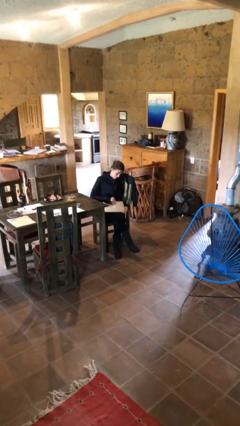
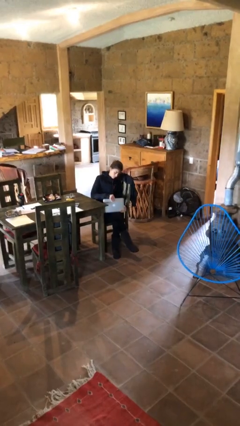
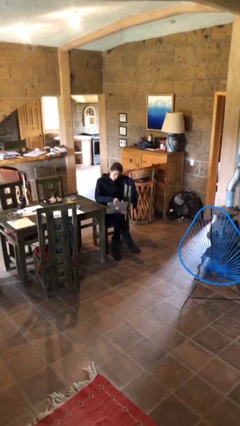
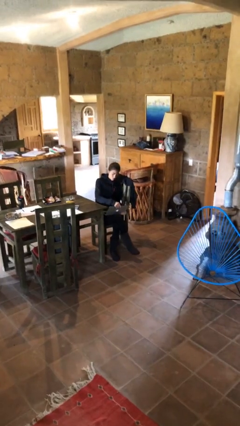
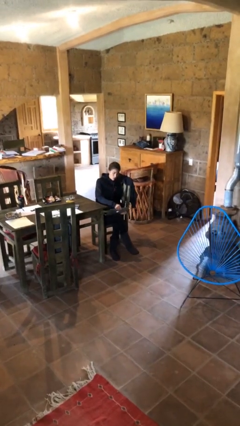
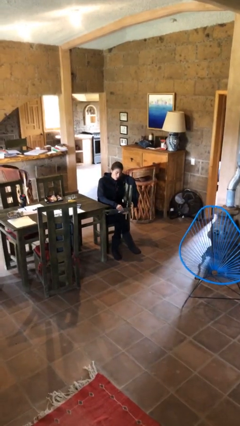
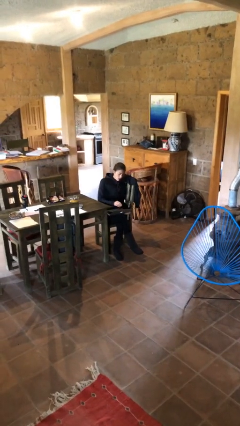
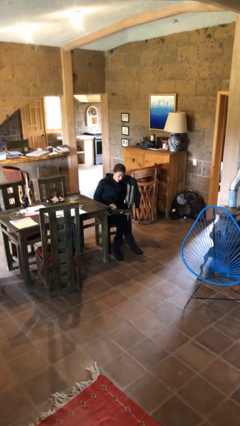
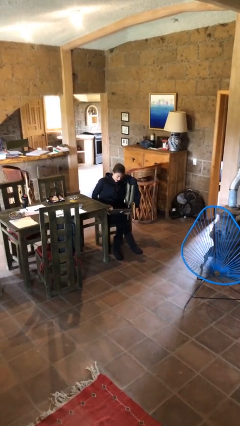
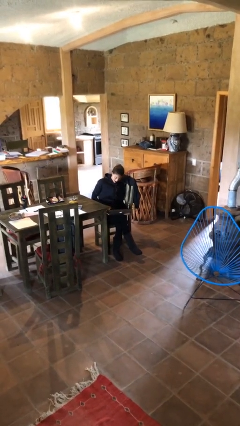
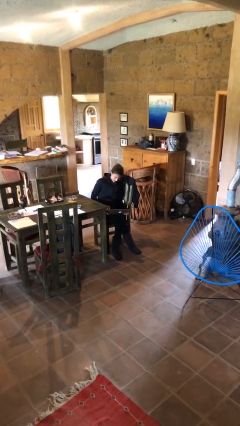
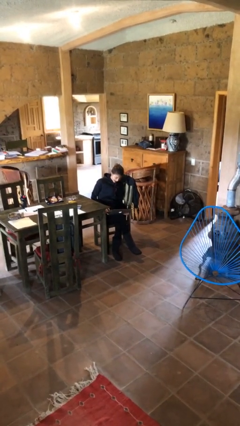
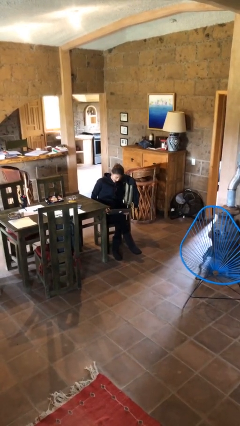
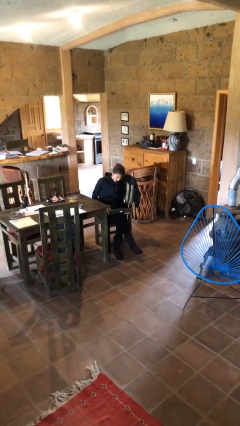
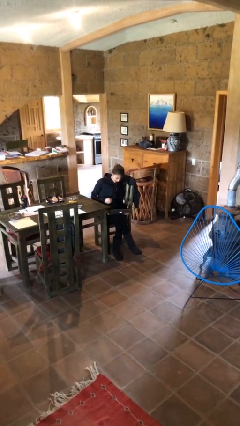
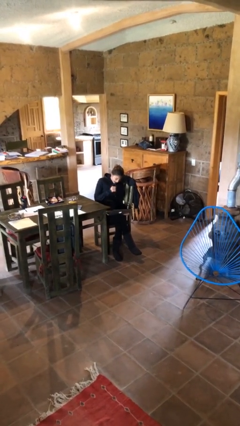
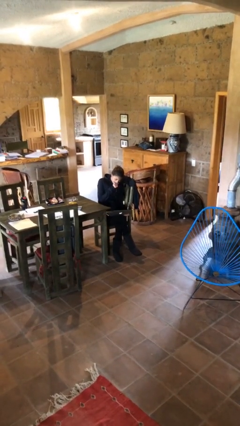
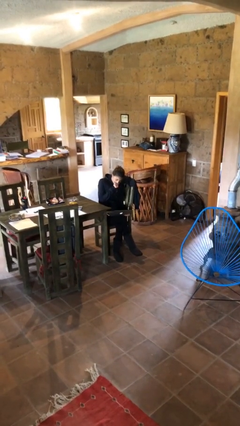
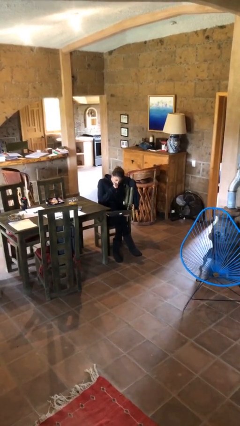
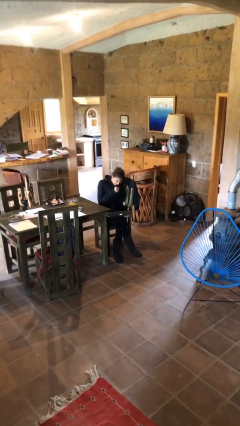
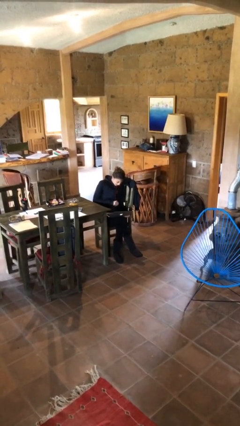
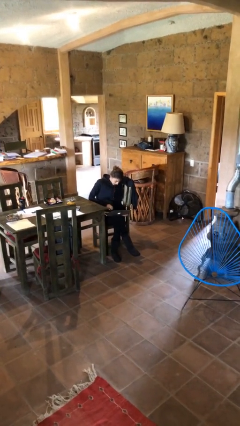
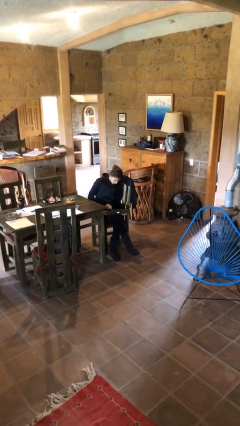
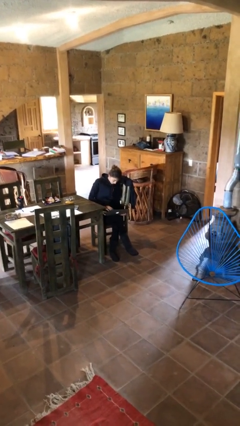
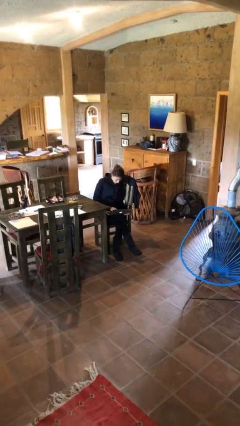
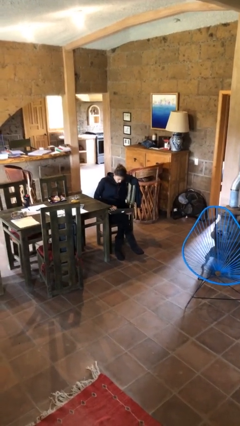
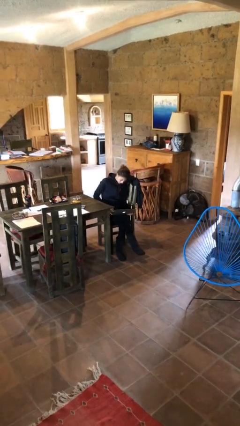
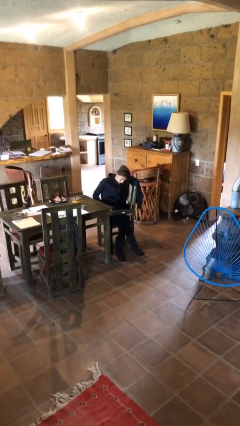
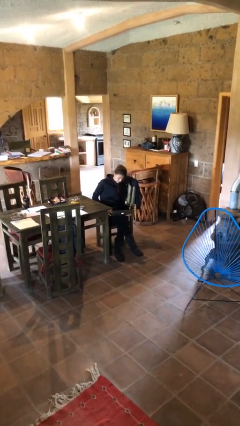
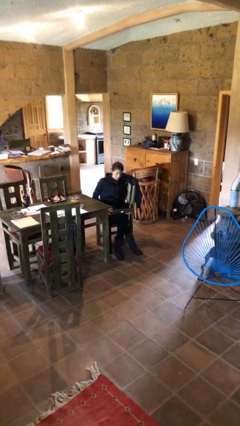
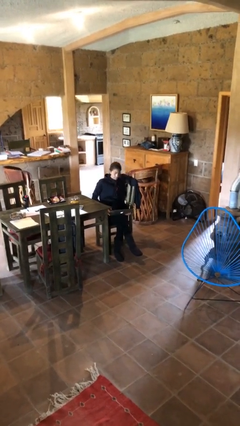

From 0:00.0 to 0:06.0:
person interacts with laptop

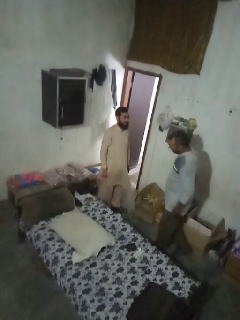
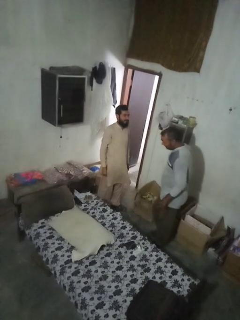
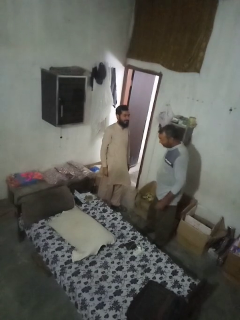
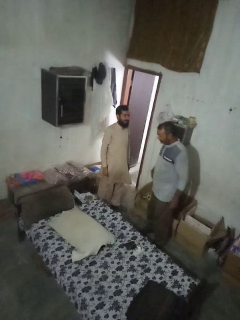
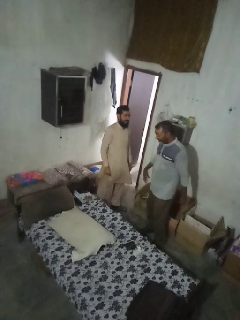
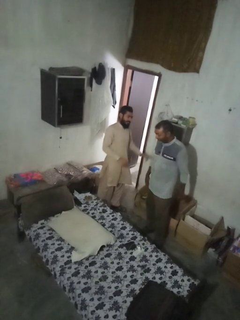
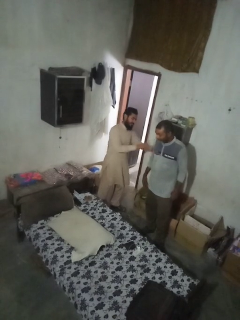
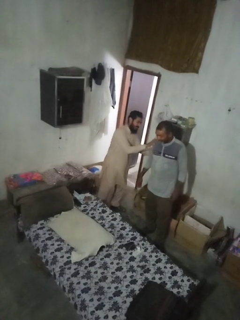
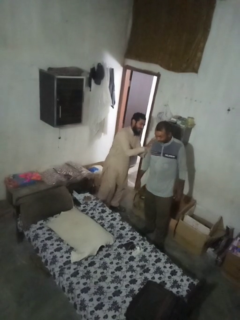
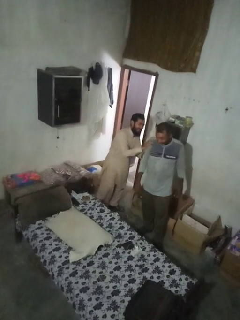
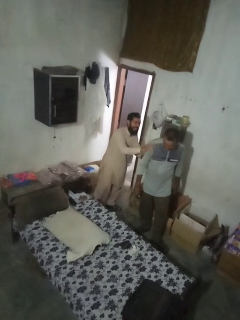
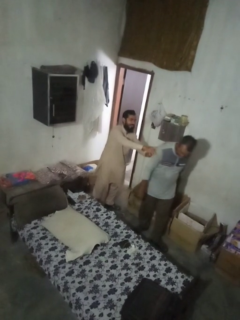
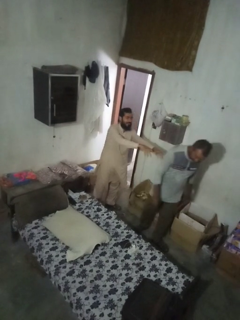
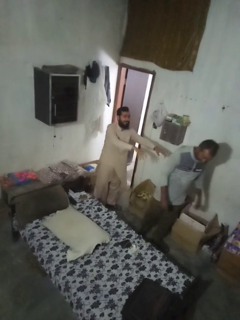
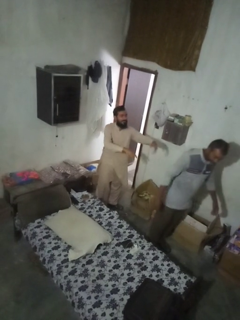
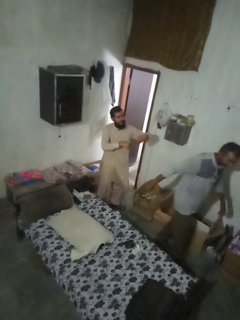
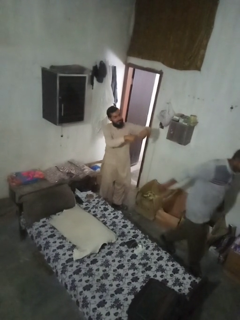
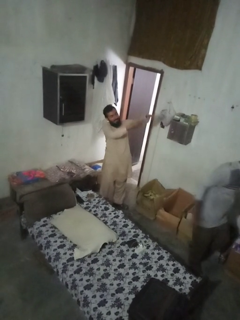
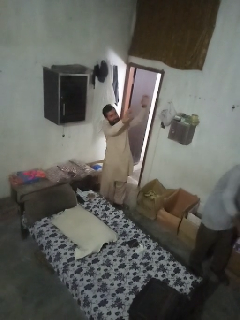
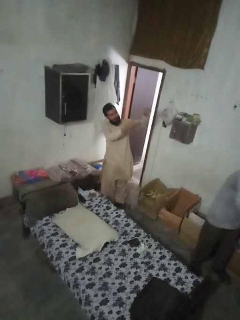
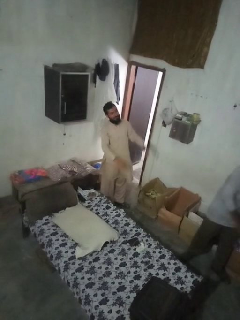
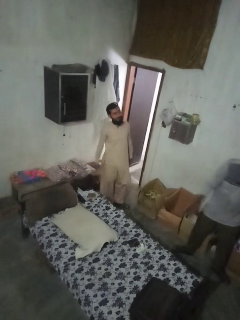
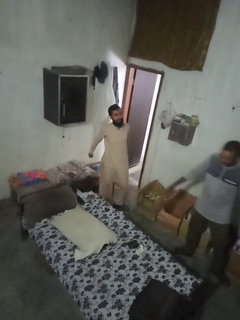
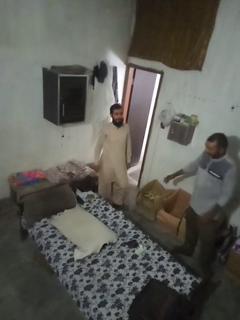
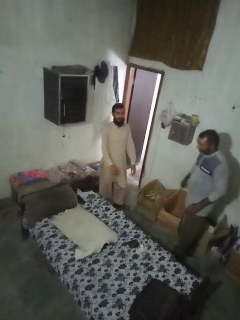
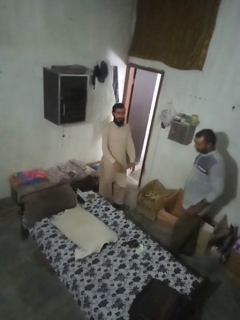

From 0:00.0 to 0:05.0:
person shoves person

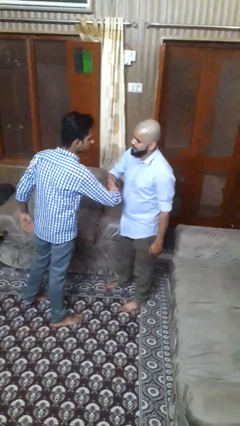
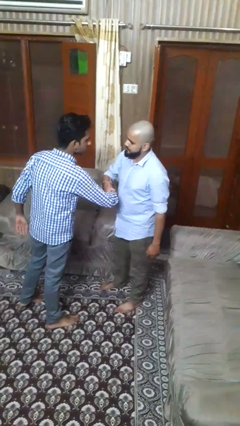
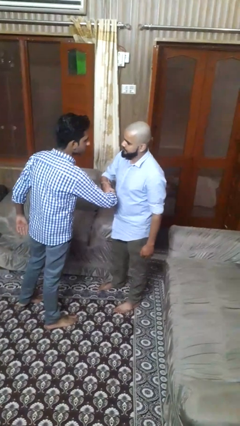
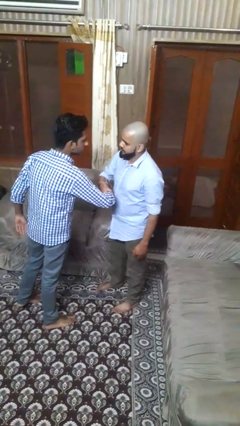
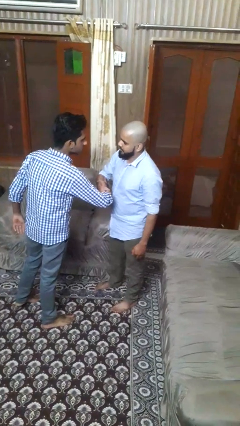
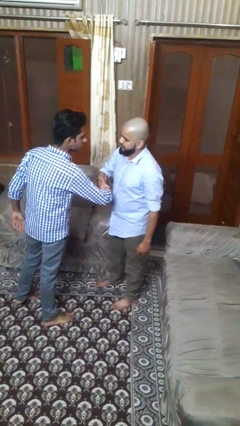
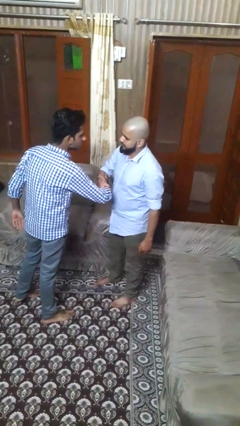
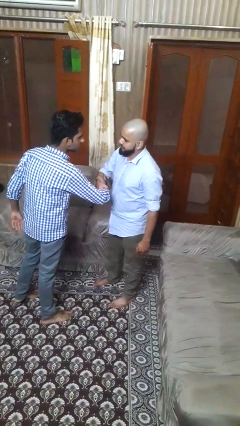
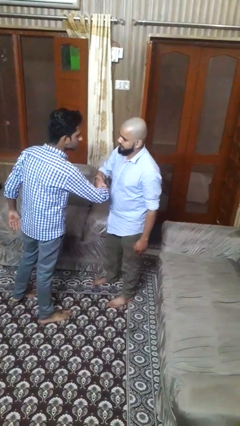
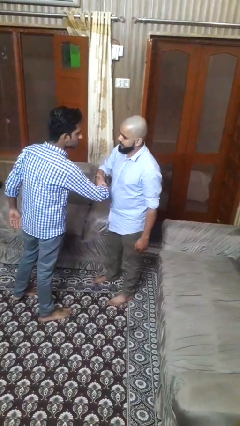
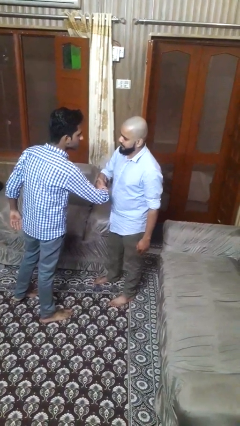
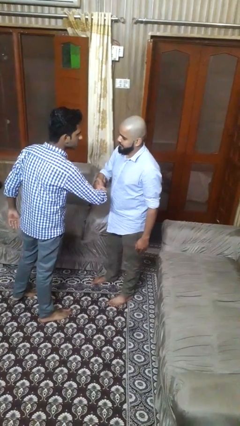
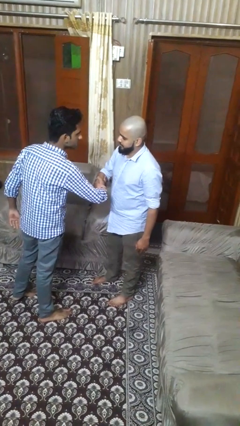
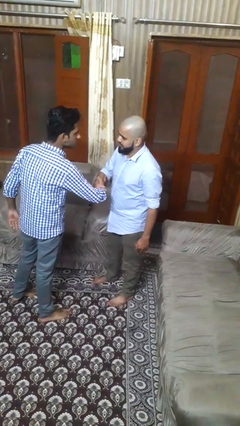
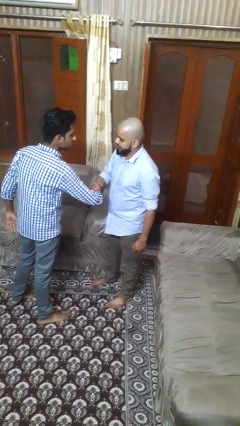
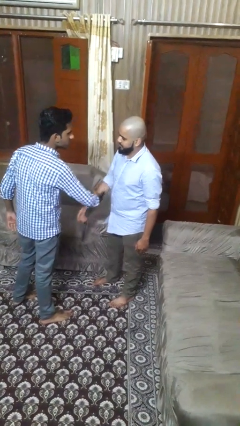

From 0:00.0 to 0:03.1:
person grabs person by forearm

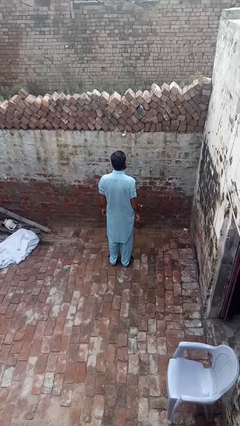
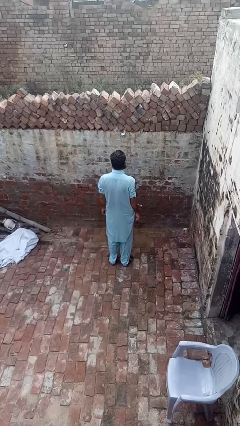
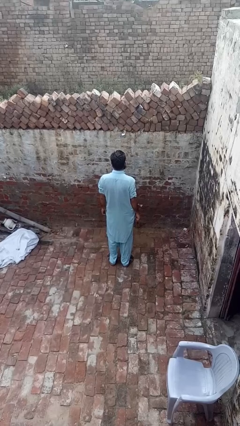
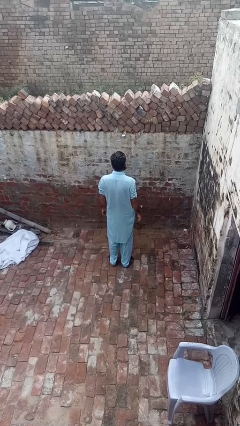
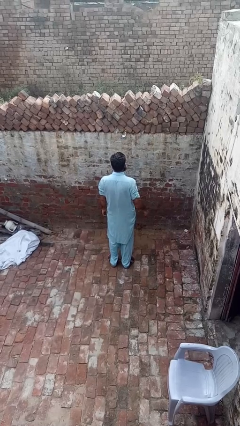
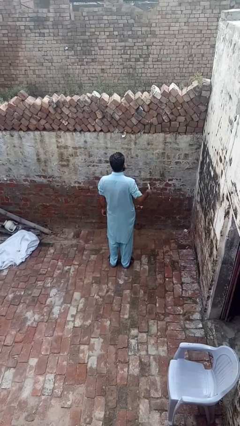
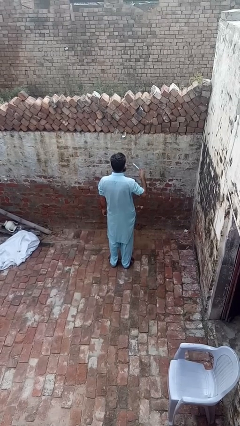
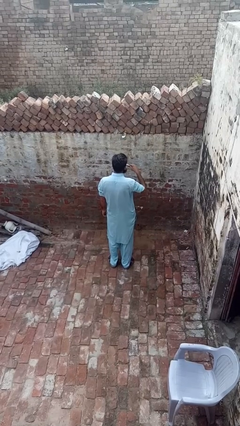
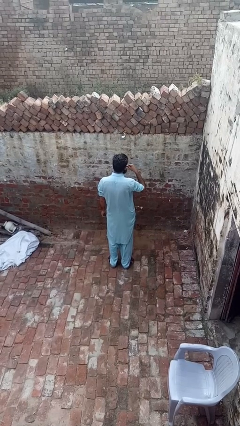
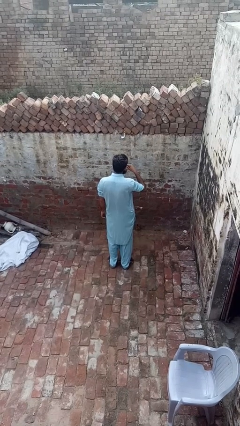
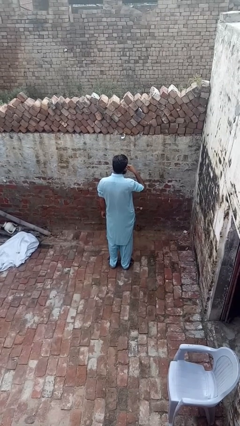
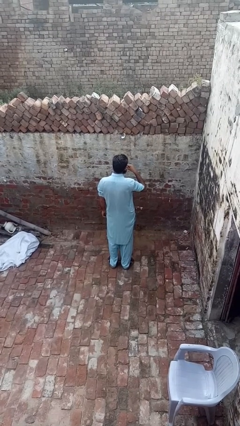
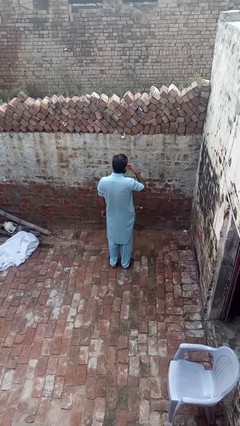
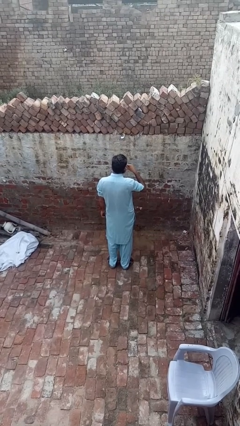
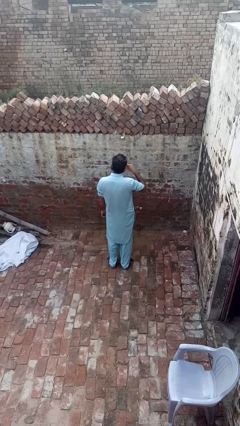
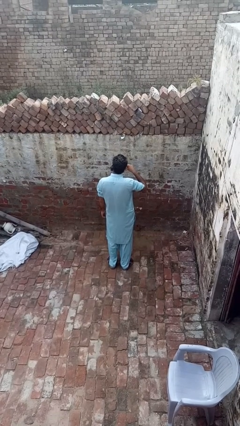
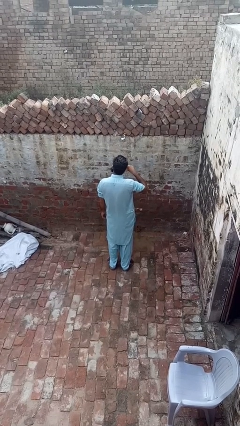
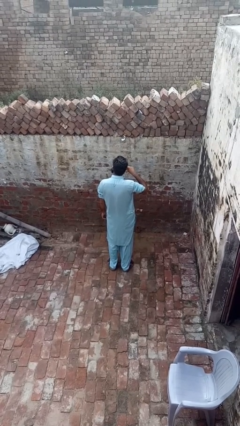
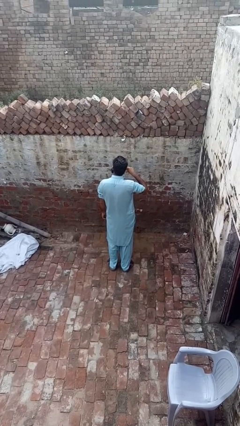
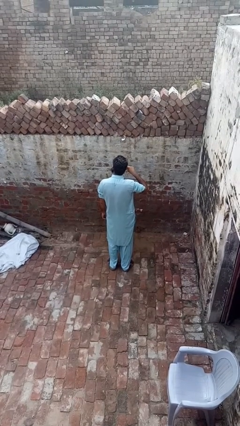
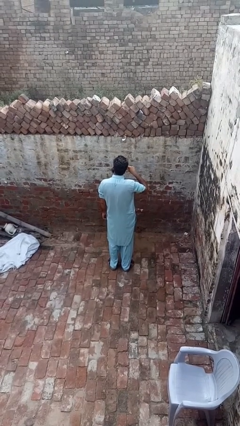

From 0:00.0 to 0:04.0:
person brushes teeth

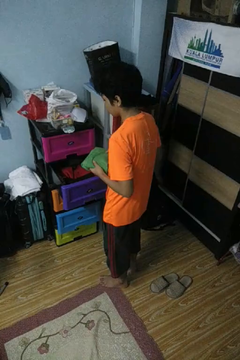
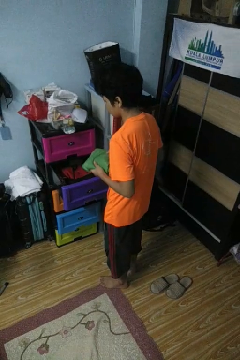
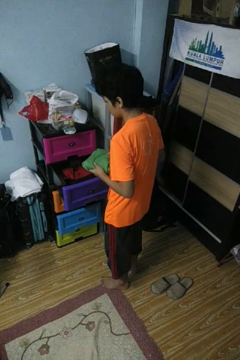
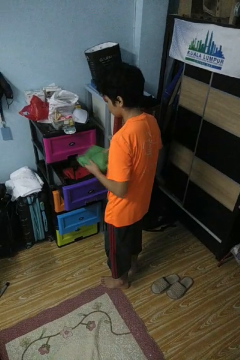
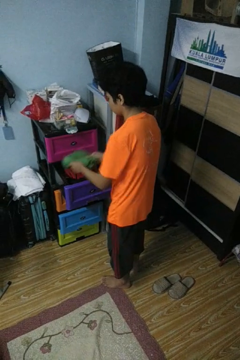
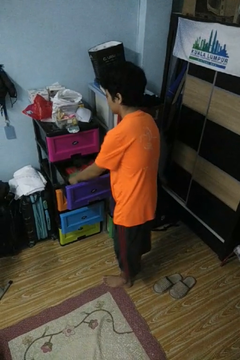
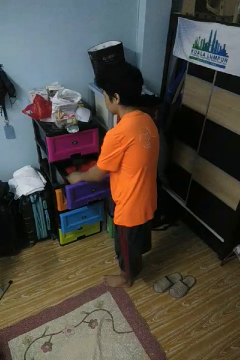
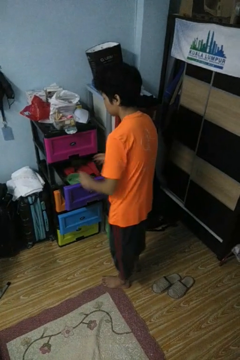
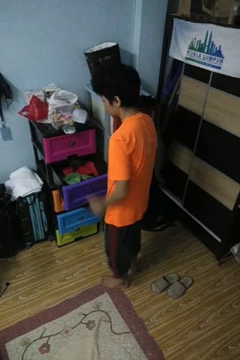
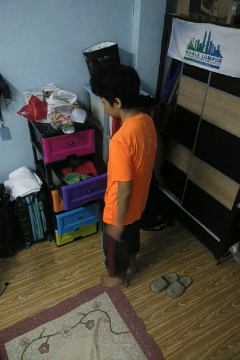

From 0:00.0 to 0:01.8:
person puts clothes into dresser
